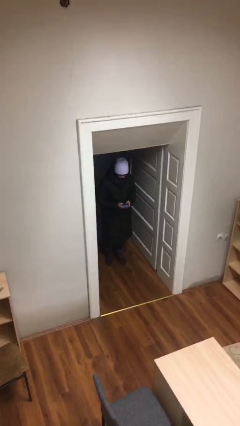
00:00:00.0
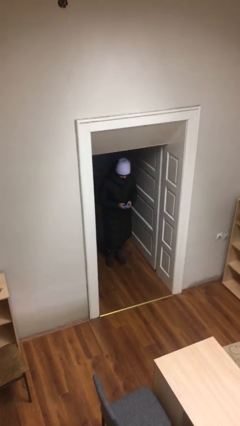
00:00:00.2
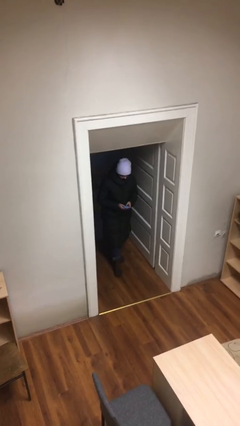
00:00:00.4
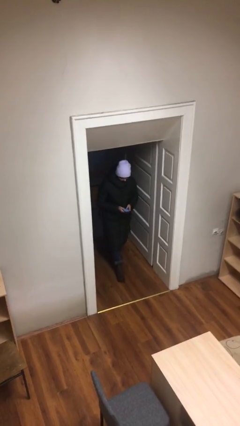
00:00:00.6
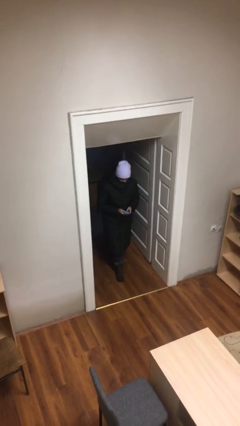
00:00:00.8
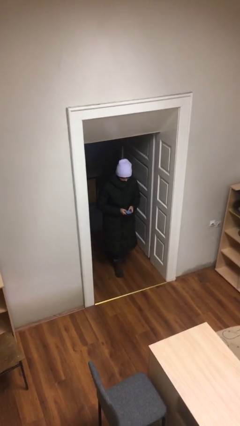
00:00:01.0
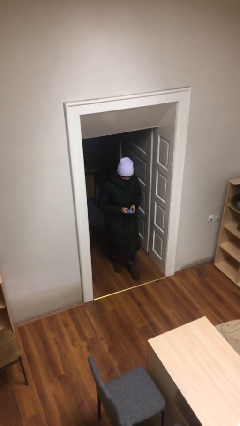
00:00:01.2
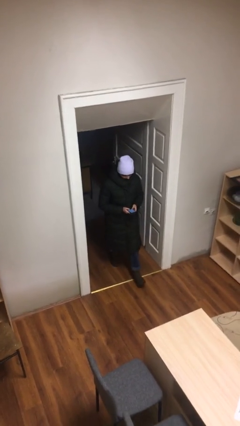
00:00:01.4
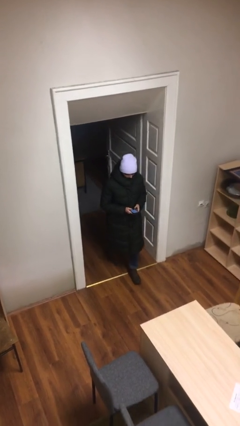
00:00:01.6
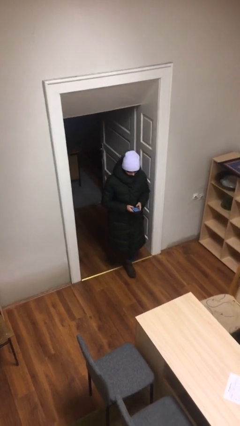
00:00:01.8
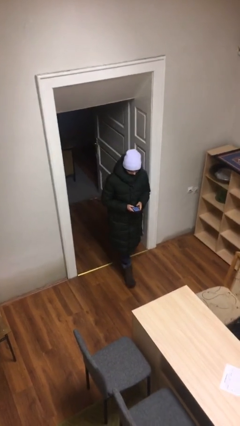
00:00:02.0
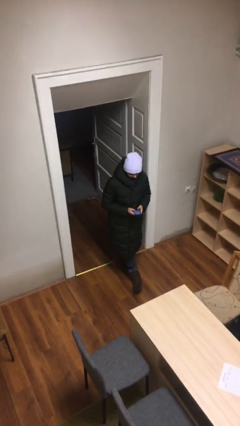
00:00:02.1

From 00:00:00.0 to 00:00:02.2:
person enters scene through structure

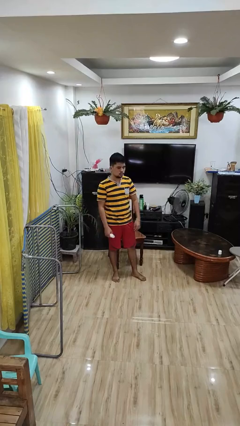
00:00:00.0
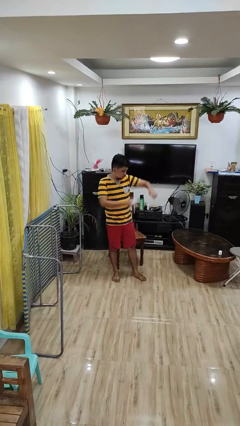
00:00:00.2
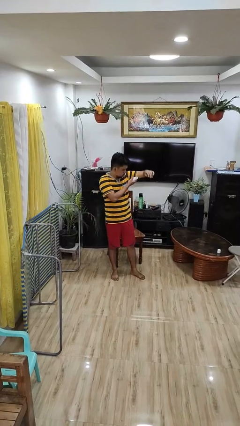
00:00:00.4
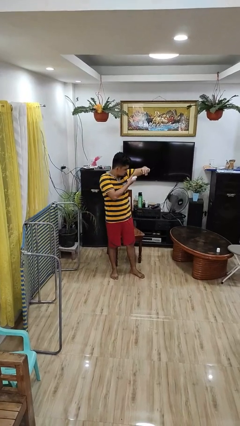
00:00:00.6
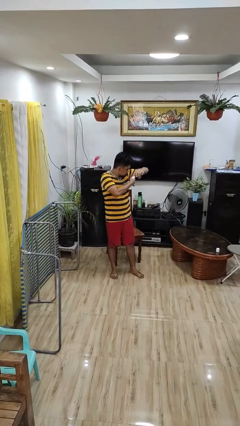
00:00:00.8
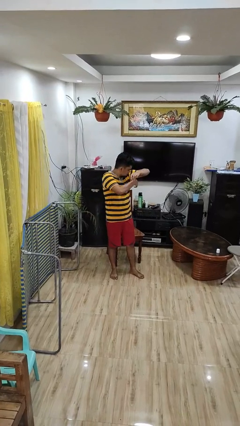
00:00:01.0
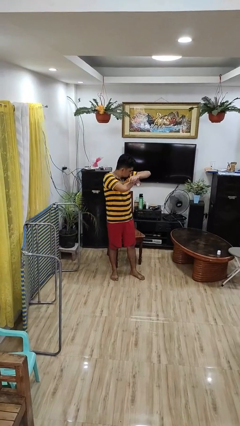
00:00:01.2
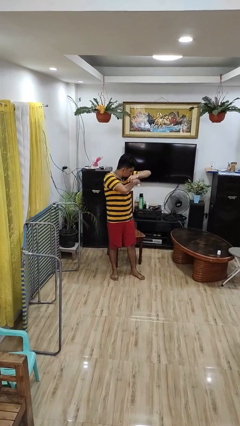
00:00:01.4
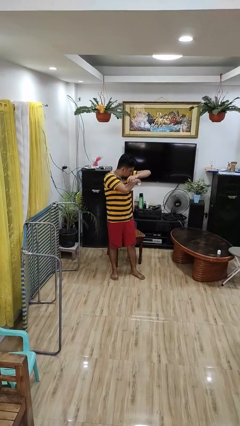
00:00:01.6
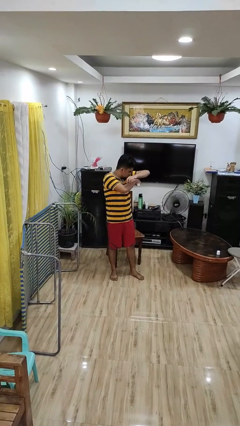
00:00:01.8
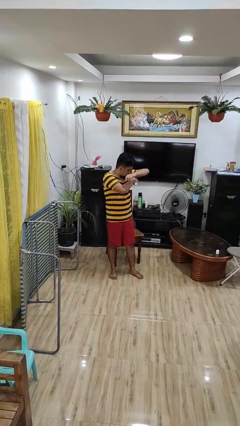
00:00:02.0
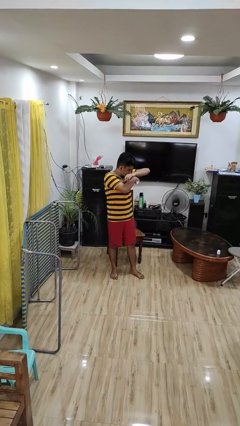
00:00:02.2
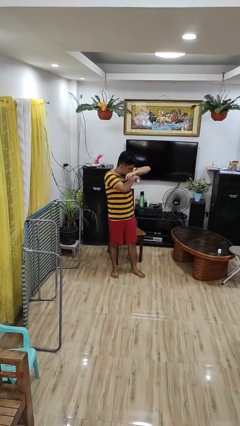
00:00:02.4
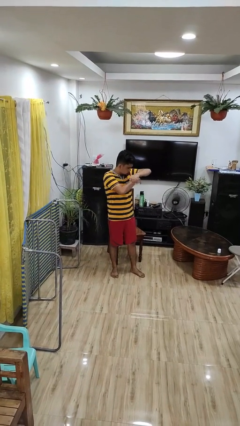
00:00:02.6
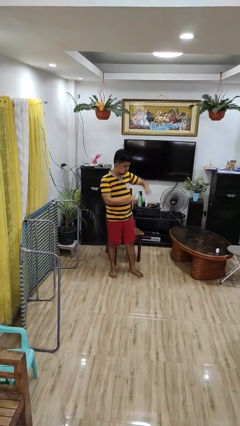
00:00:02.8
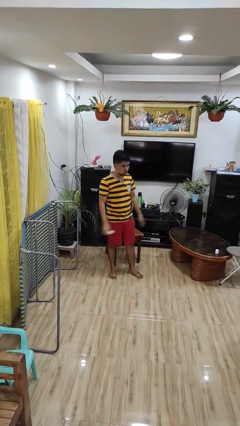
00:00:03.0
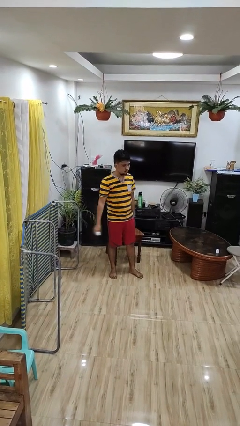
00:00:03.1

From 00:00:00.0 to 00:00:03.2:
person applies deodorant

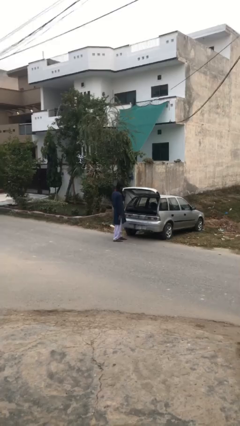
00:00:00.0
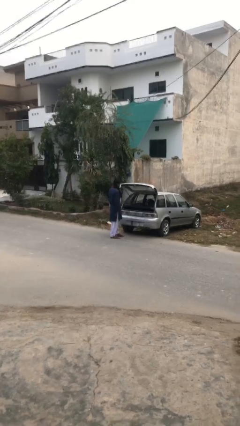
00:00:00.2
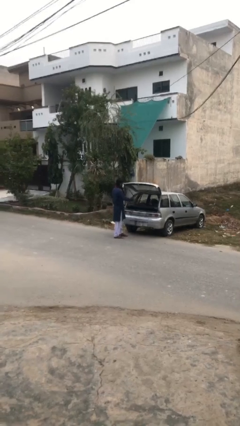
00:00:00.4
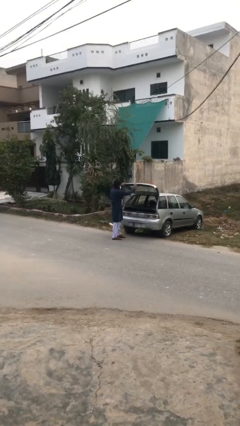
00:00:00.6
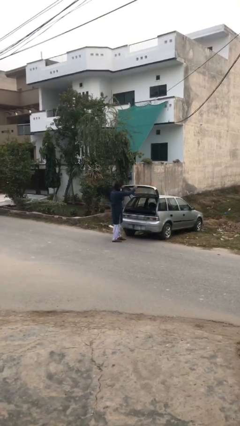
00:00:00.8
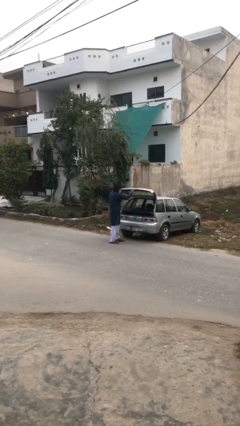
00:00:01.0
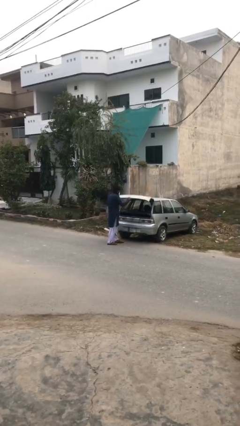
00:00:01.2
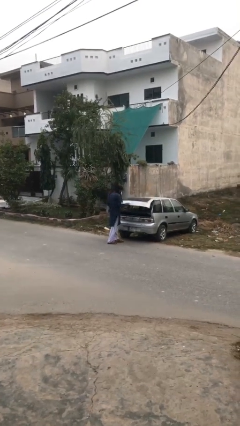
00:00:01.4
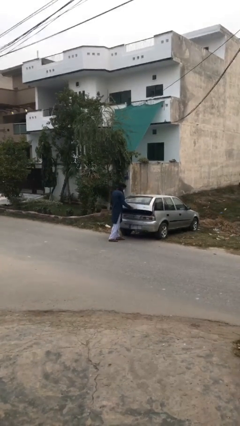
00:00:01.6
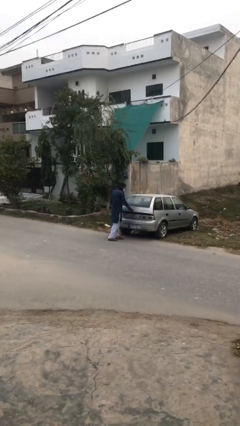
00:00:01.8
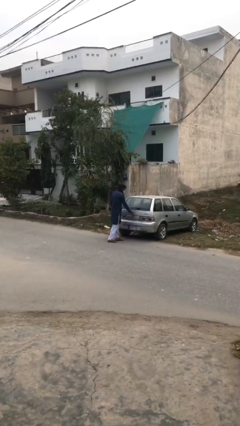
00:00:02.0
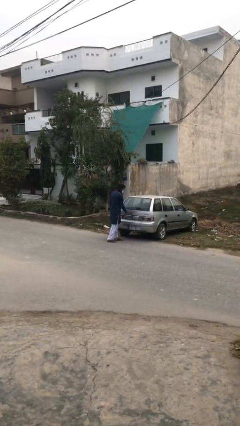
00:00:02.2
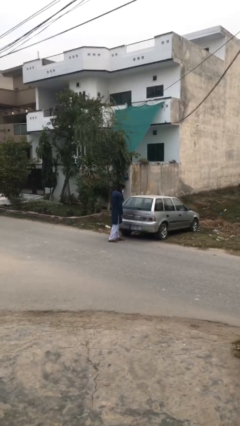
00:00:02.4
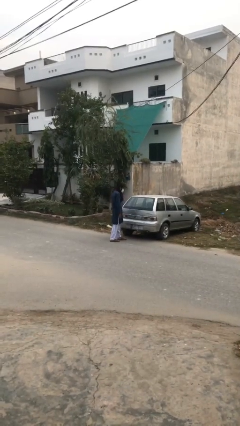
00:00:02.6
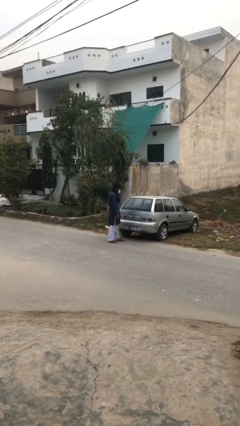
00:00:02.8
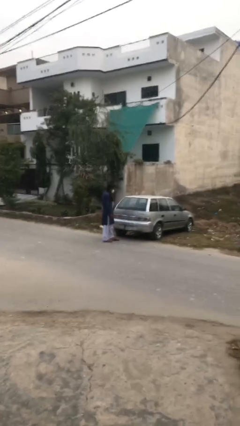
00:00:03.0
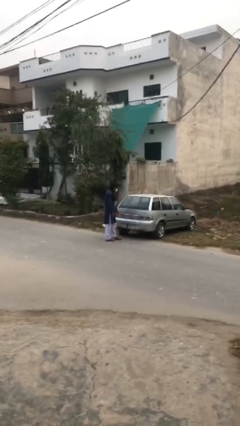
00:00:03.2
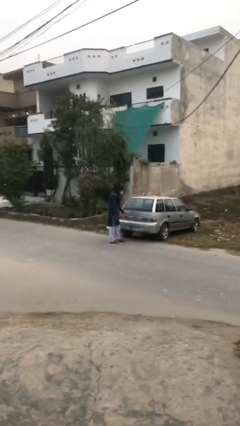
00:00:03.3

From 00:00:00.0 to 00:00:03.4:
person closes car trunk

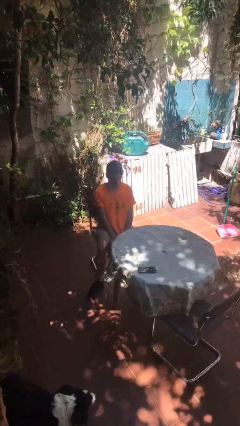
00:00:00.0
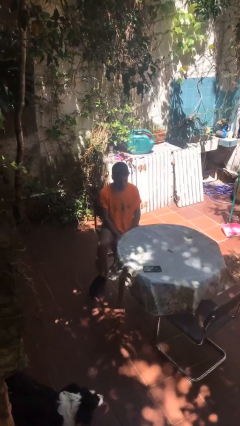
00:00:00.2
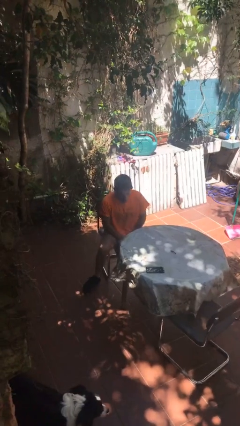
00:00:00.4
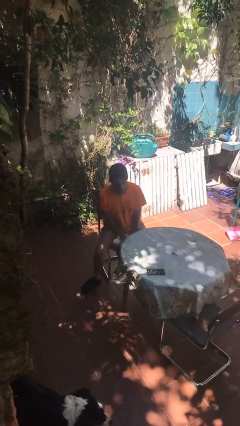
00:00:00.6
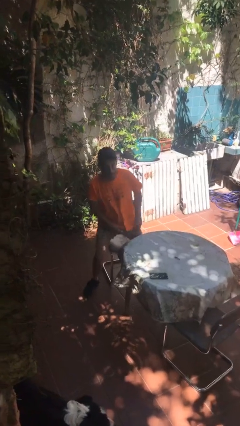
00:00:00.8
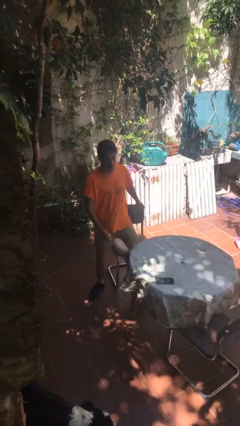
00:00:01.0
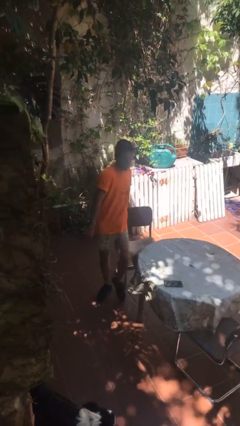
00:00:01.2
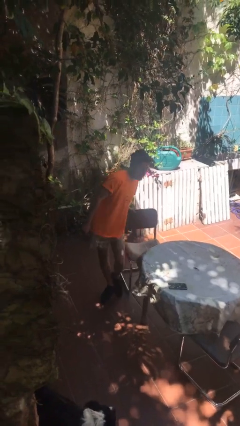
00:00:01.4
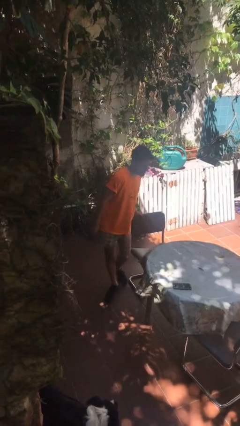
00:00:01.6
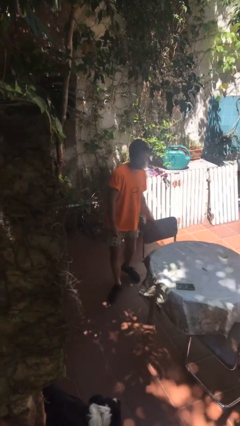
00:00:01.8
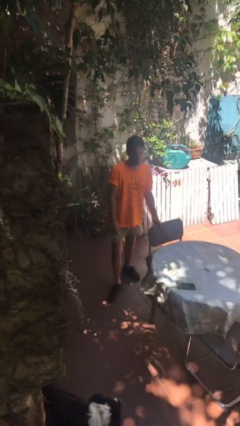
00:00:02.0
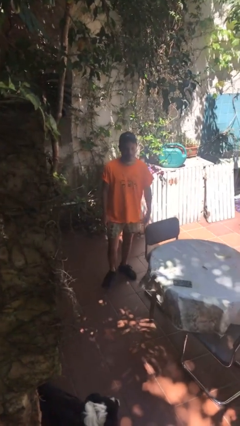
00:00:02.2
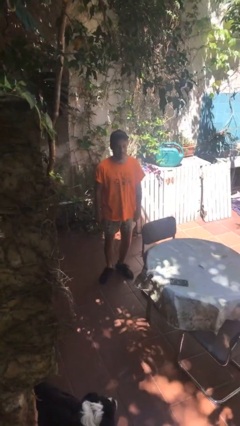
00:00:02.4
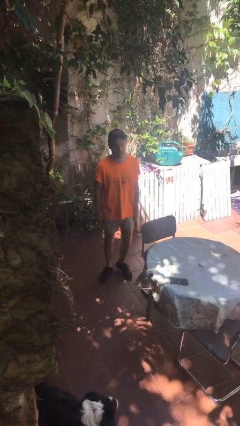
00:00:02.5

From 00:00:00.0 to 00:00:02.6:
person stands up

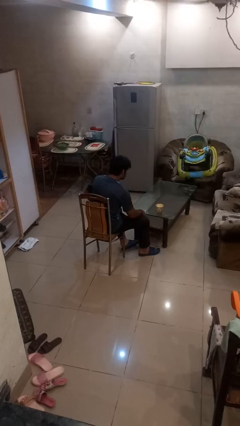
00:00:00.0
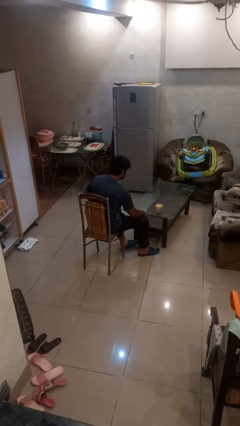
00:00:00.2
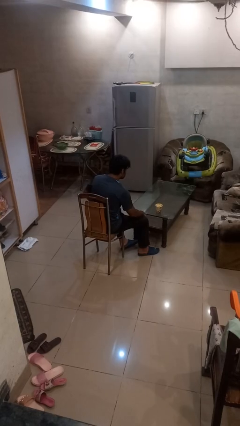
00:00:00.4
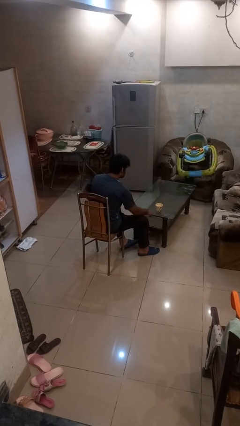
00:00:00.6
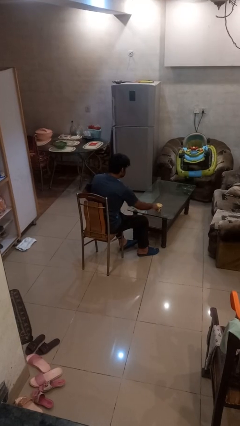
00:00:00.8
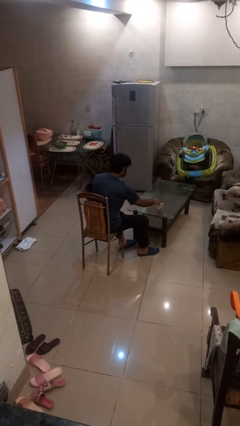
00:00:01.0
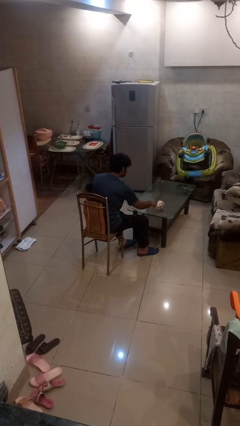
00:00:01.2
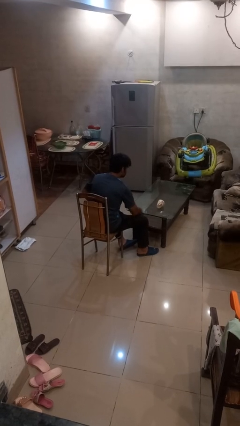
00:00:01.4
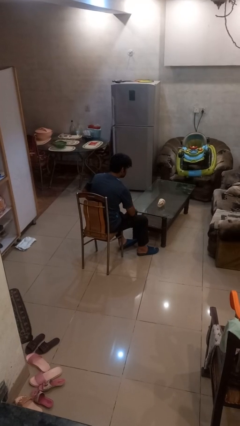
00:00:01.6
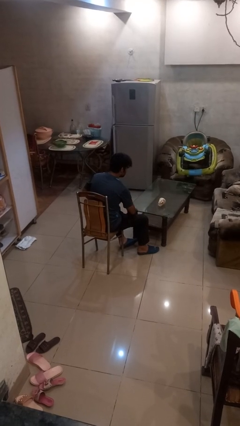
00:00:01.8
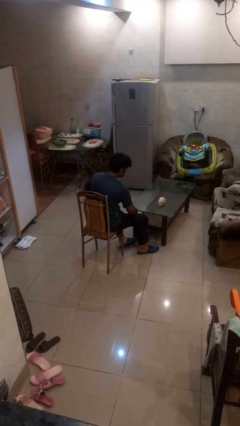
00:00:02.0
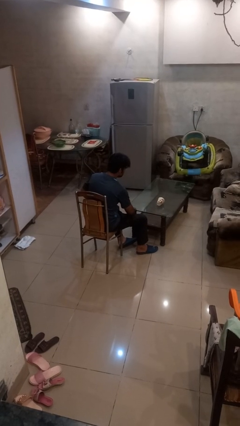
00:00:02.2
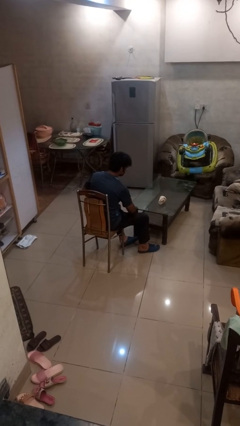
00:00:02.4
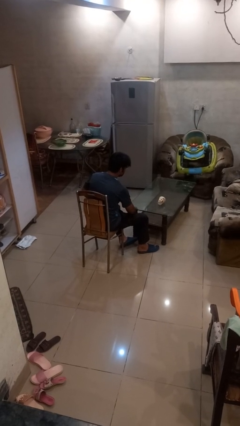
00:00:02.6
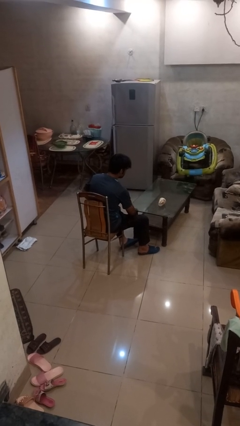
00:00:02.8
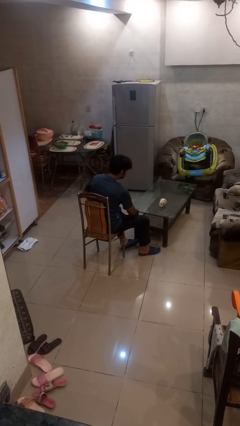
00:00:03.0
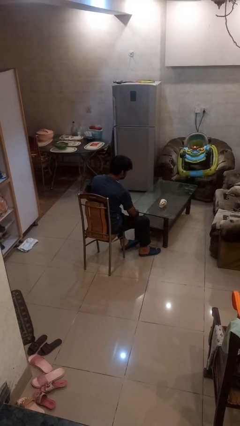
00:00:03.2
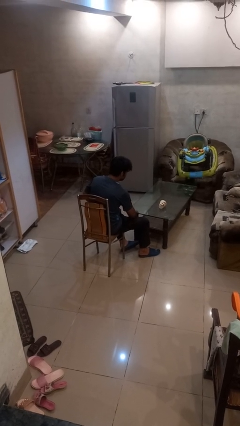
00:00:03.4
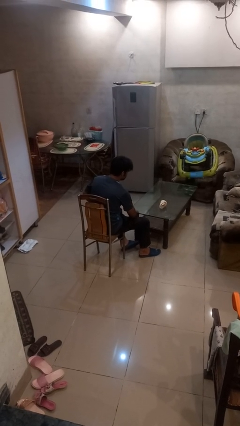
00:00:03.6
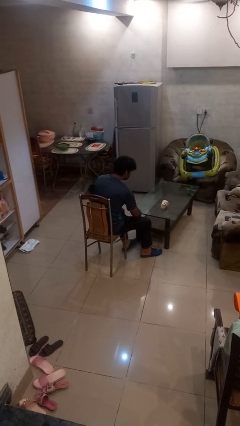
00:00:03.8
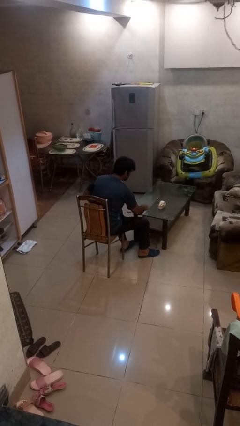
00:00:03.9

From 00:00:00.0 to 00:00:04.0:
person spills on table

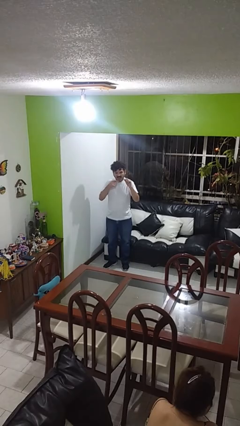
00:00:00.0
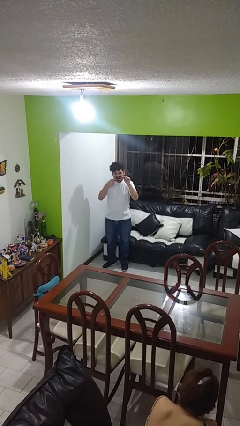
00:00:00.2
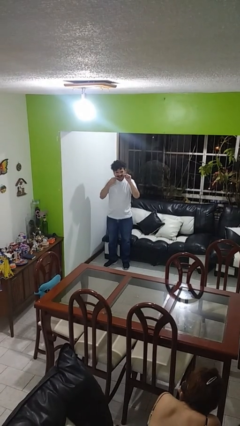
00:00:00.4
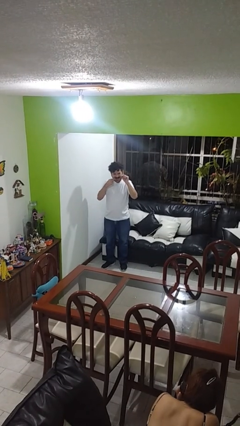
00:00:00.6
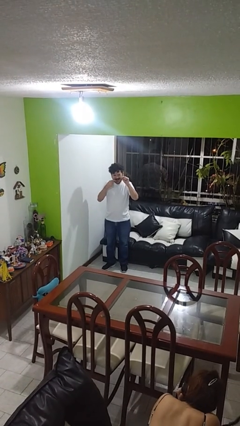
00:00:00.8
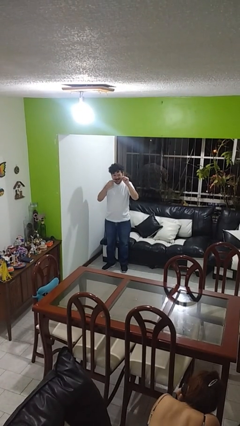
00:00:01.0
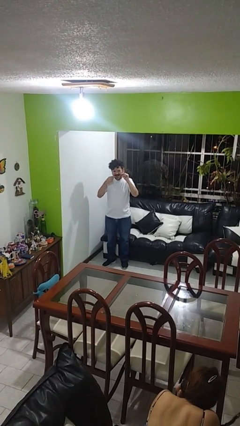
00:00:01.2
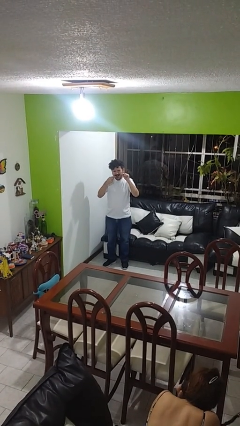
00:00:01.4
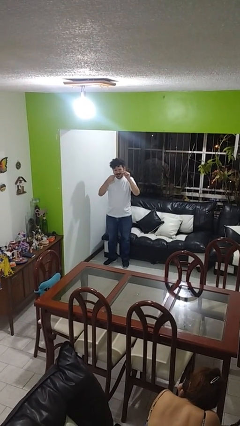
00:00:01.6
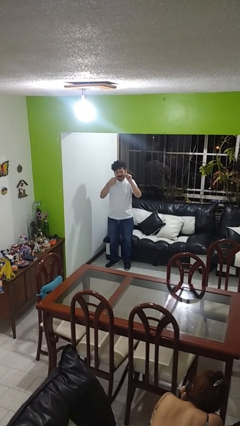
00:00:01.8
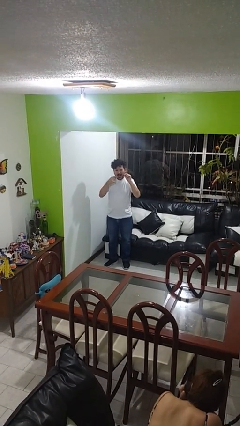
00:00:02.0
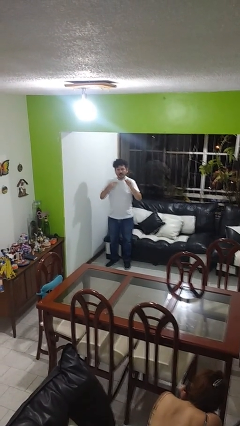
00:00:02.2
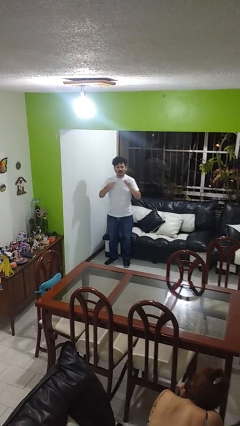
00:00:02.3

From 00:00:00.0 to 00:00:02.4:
person flosses
